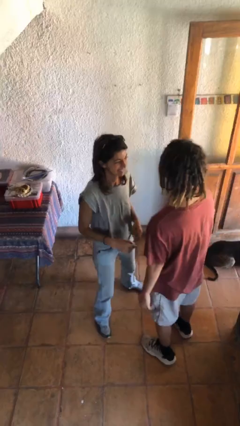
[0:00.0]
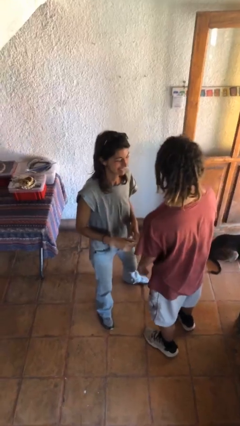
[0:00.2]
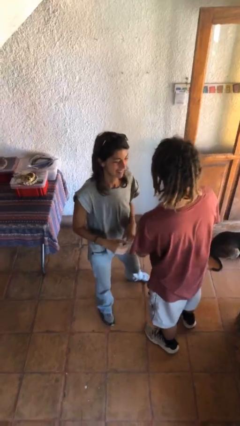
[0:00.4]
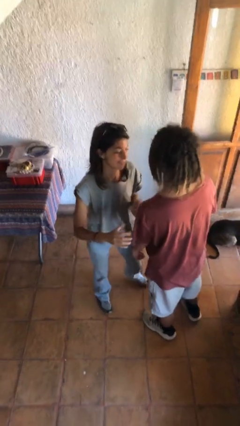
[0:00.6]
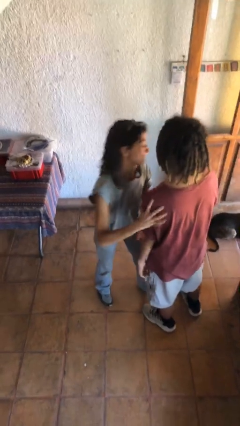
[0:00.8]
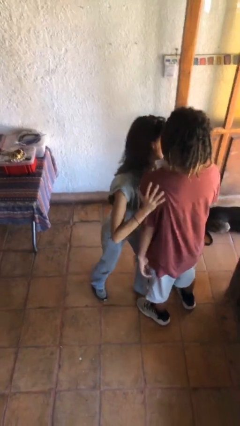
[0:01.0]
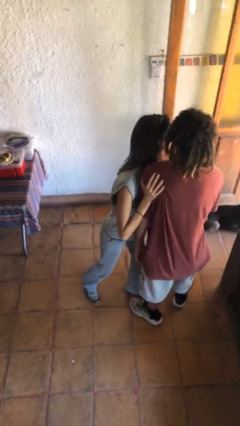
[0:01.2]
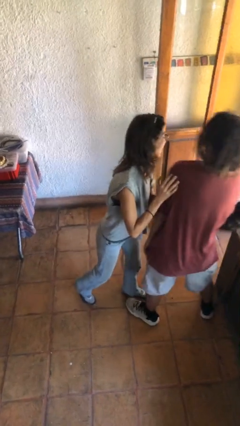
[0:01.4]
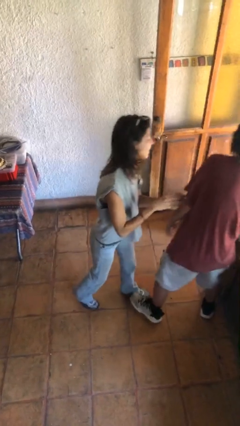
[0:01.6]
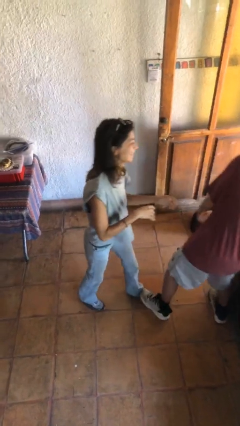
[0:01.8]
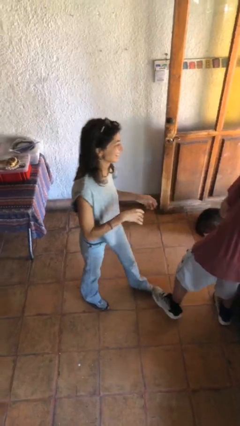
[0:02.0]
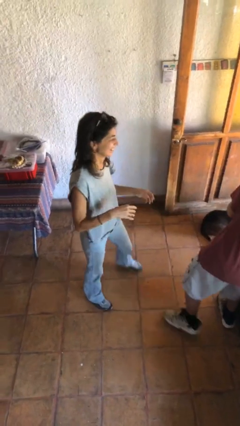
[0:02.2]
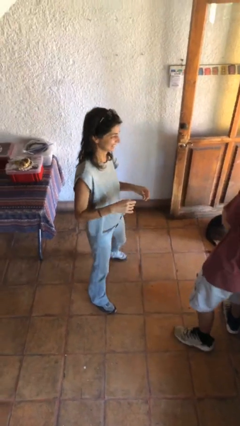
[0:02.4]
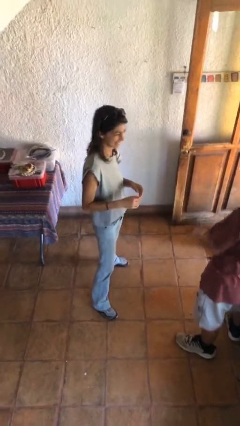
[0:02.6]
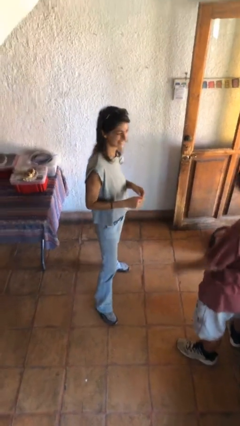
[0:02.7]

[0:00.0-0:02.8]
person shoves person

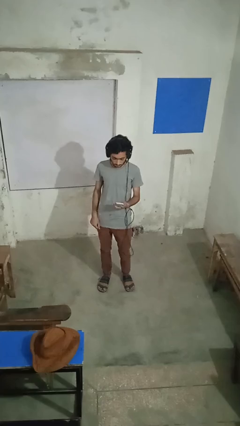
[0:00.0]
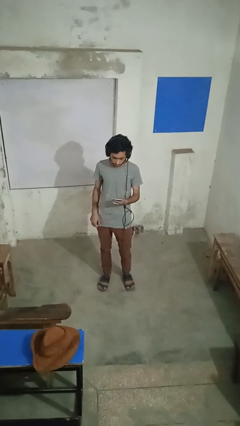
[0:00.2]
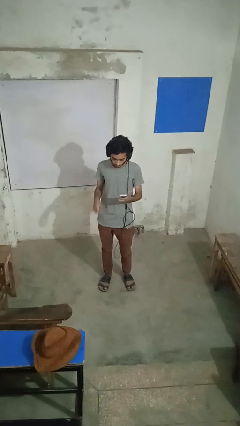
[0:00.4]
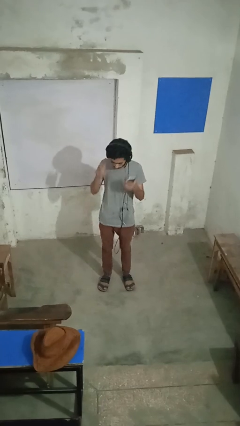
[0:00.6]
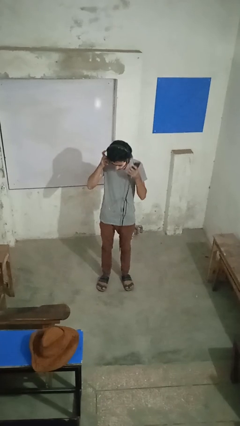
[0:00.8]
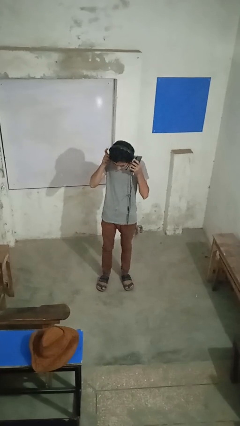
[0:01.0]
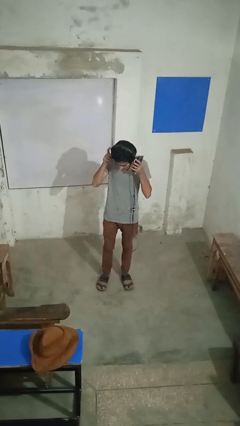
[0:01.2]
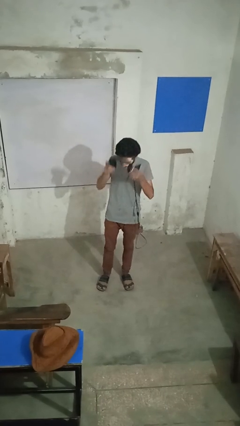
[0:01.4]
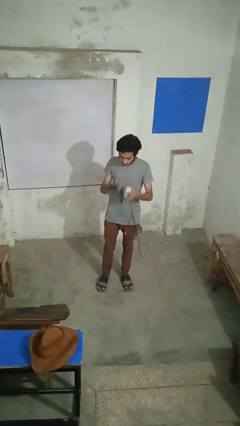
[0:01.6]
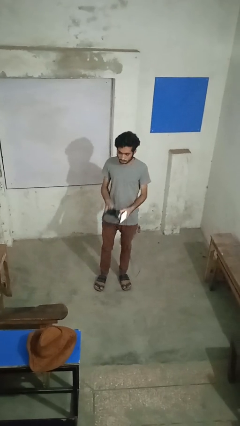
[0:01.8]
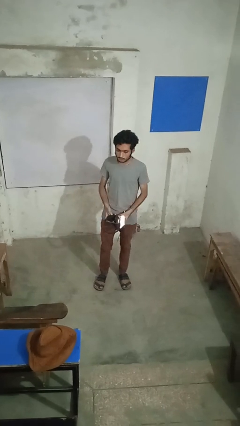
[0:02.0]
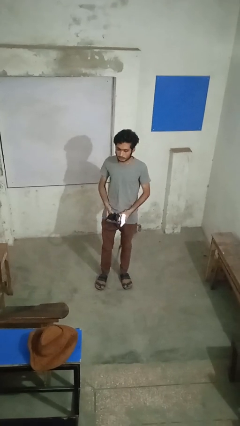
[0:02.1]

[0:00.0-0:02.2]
person takes off headphones

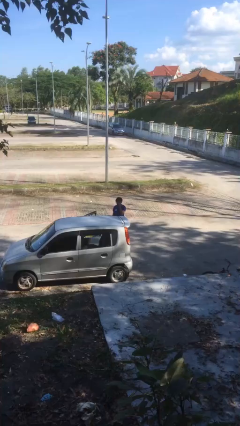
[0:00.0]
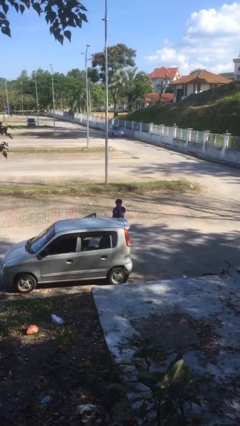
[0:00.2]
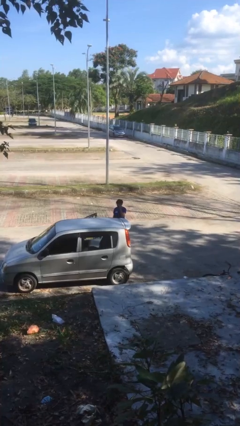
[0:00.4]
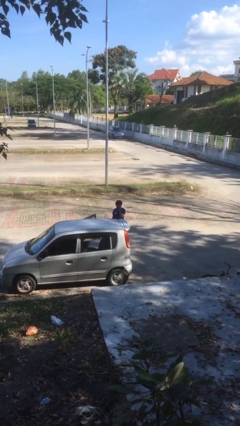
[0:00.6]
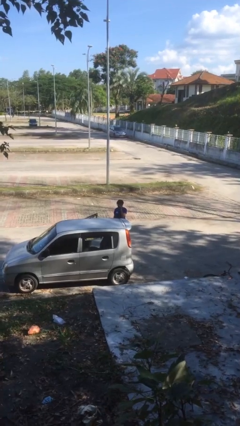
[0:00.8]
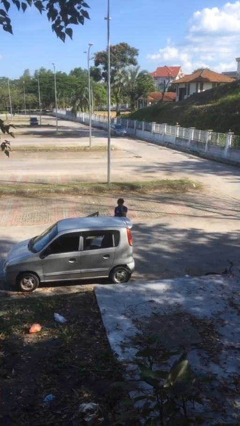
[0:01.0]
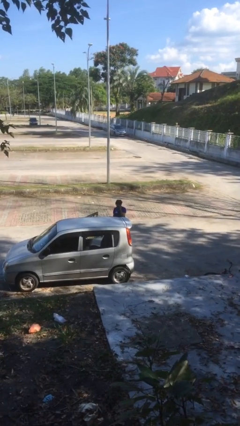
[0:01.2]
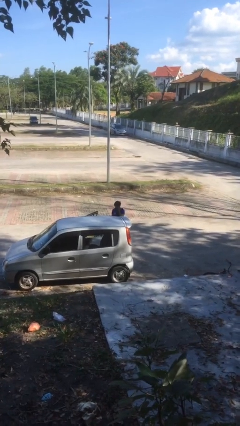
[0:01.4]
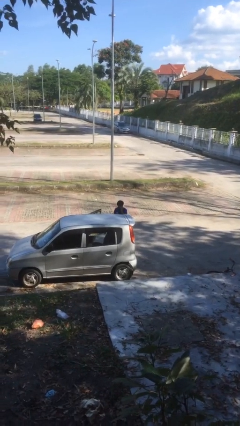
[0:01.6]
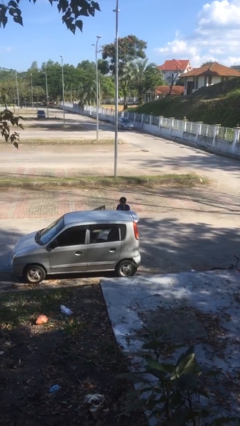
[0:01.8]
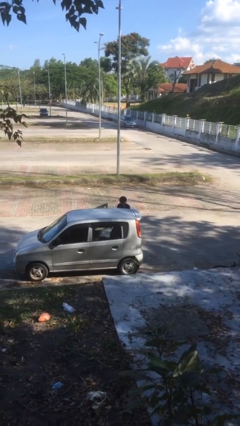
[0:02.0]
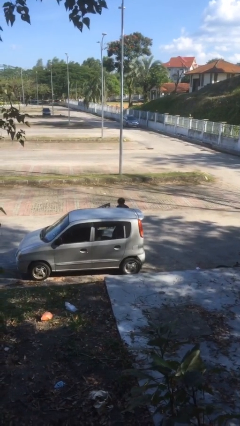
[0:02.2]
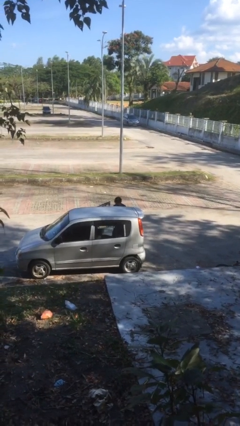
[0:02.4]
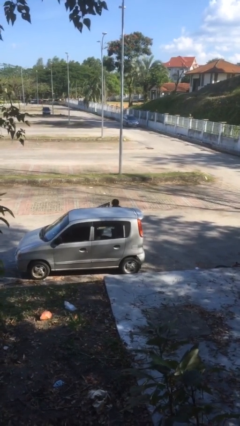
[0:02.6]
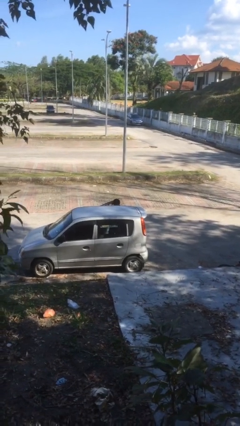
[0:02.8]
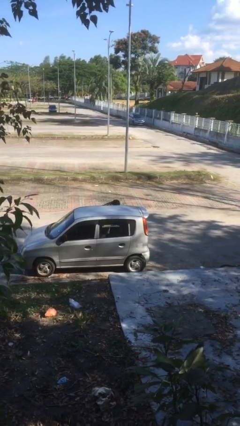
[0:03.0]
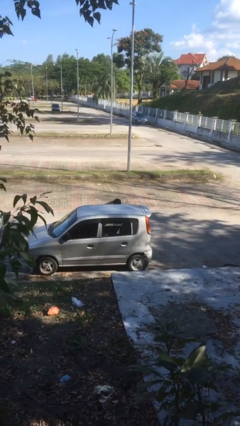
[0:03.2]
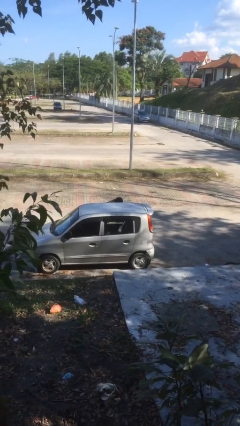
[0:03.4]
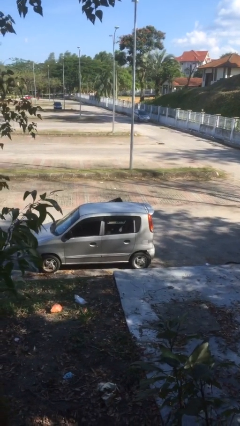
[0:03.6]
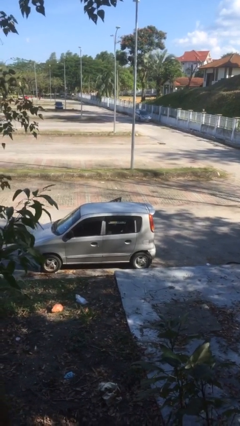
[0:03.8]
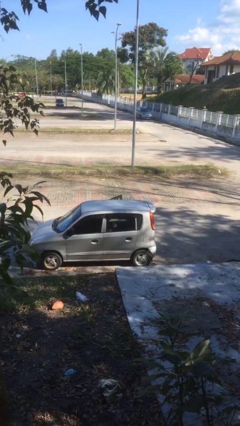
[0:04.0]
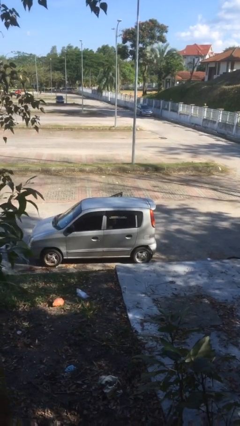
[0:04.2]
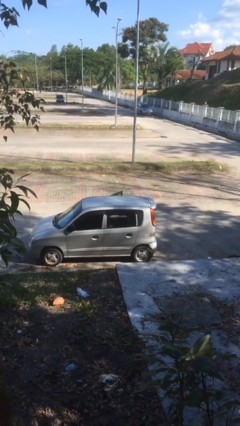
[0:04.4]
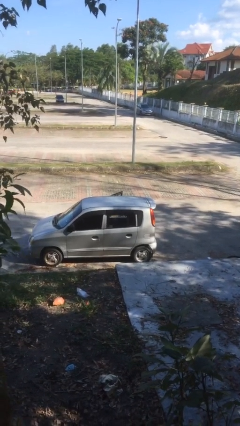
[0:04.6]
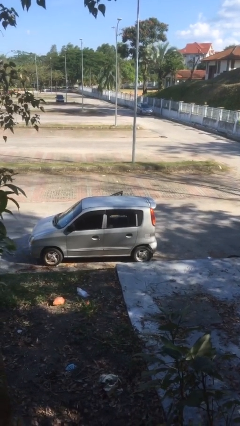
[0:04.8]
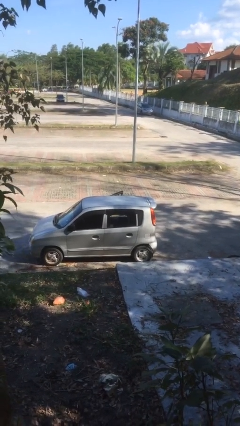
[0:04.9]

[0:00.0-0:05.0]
person enters car

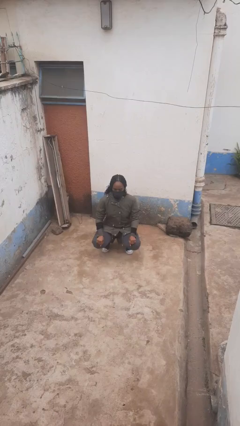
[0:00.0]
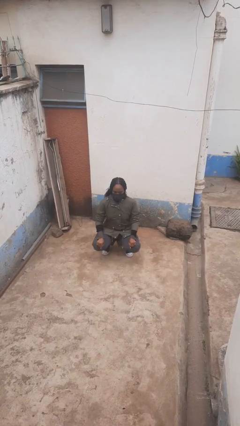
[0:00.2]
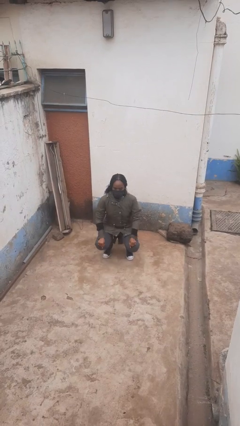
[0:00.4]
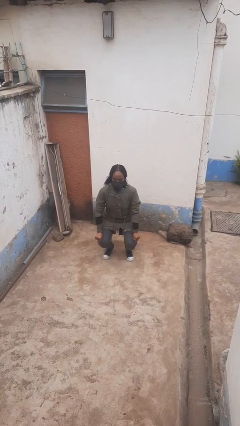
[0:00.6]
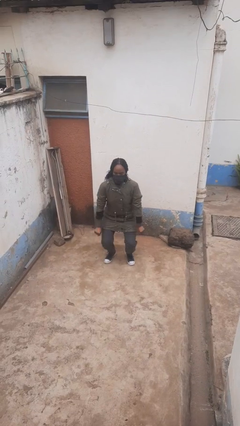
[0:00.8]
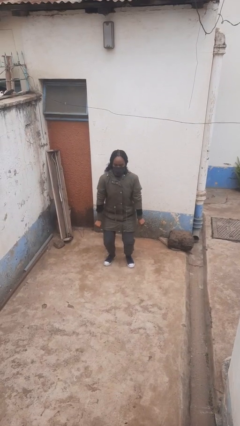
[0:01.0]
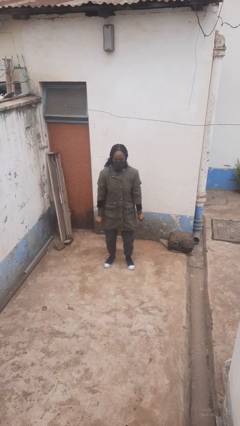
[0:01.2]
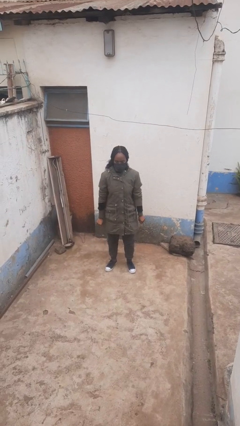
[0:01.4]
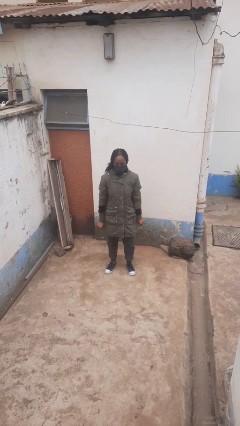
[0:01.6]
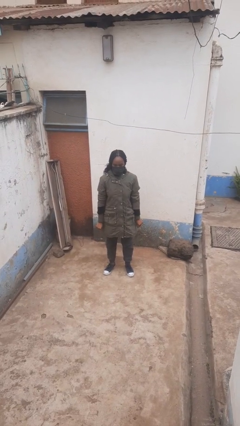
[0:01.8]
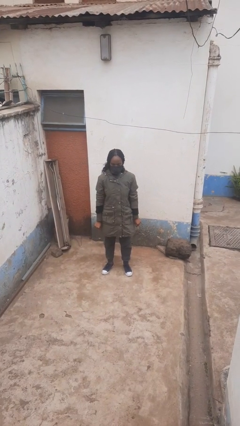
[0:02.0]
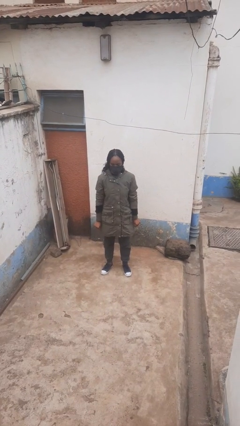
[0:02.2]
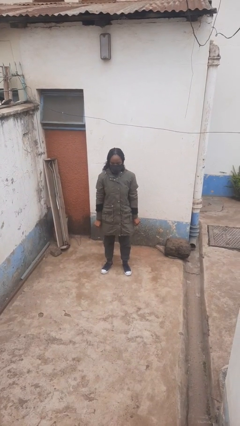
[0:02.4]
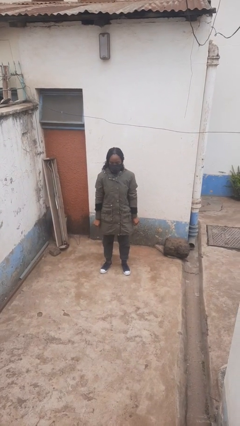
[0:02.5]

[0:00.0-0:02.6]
person stands up

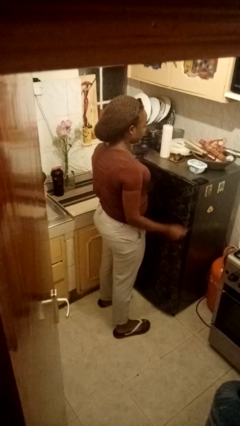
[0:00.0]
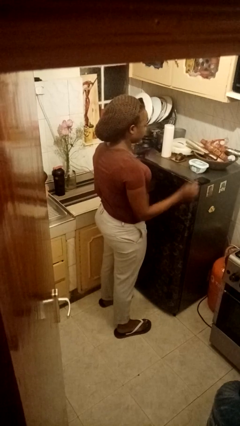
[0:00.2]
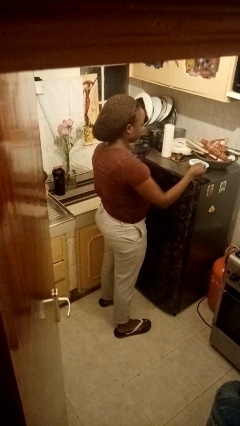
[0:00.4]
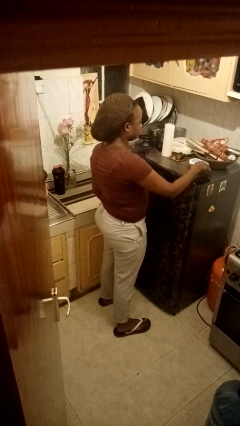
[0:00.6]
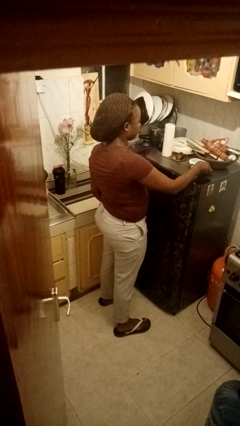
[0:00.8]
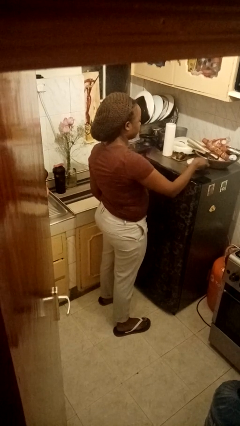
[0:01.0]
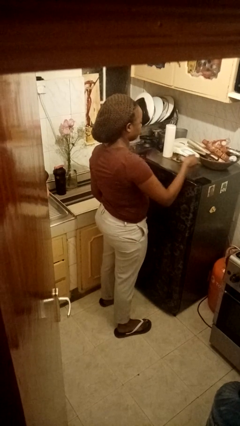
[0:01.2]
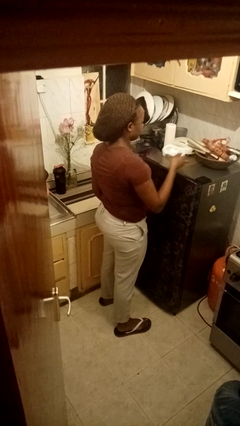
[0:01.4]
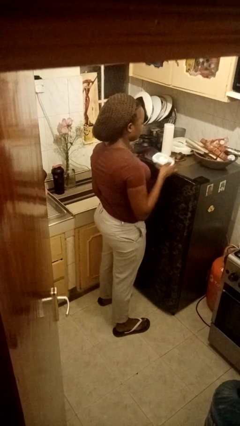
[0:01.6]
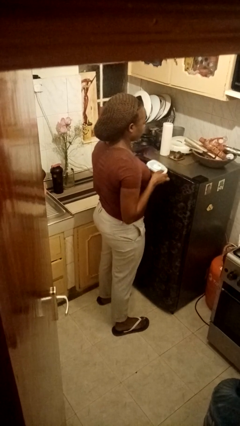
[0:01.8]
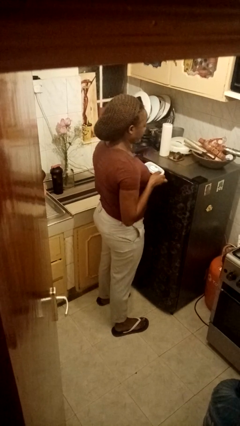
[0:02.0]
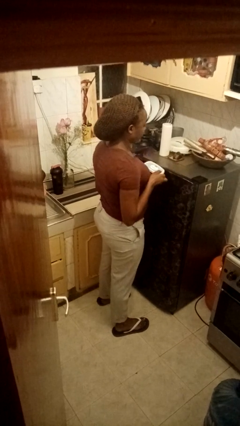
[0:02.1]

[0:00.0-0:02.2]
person picks up object from countertop

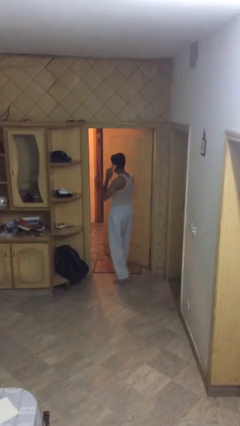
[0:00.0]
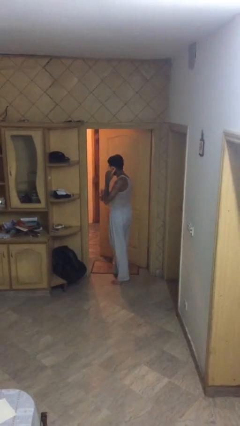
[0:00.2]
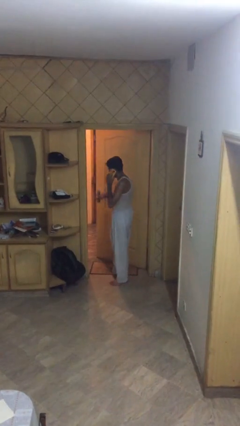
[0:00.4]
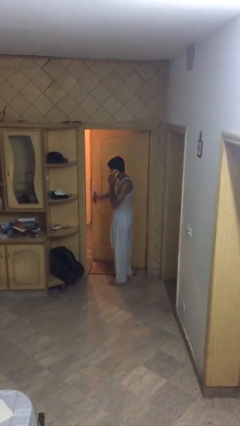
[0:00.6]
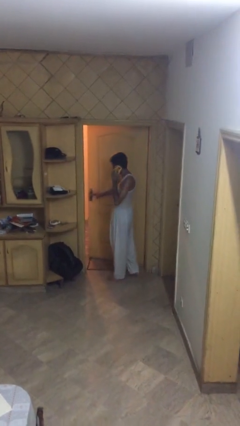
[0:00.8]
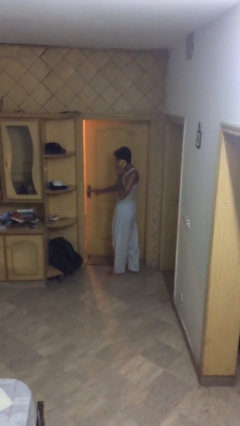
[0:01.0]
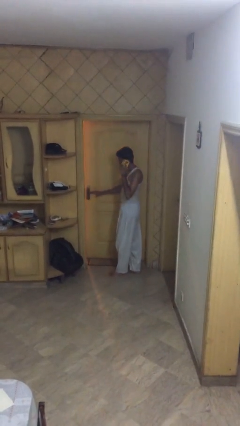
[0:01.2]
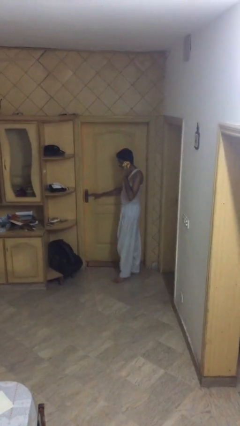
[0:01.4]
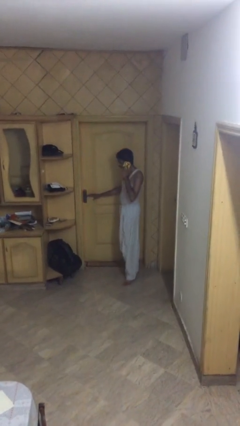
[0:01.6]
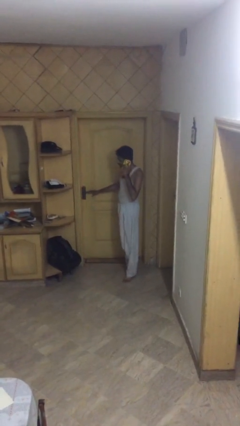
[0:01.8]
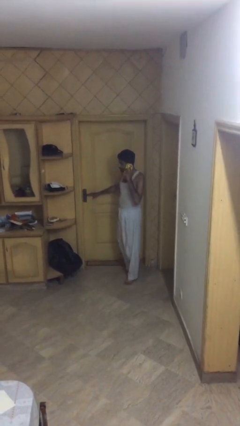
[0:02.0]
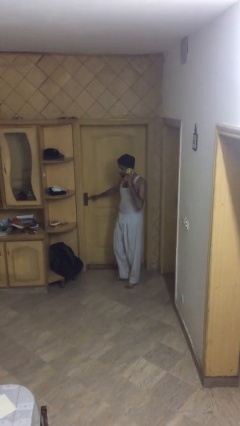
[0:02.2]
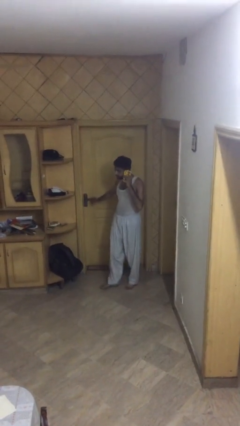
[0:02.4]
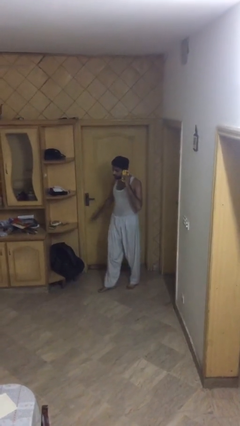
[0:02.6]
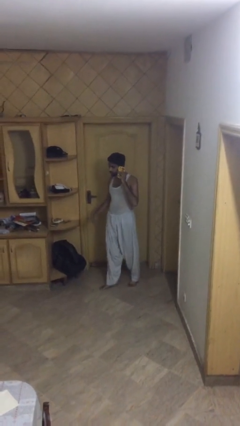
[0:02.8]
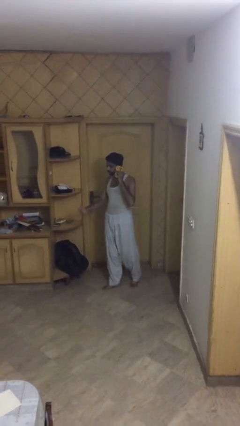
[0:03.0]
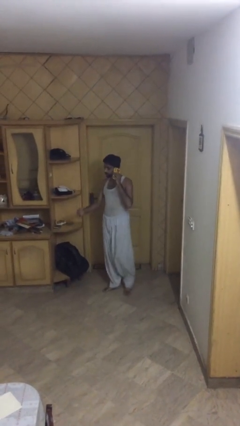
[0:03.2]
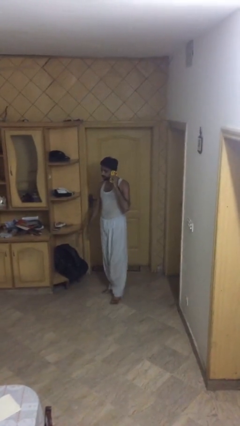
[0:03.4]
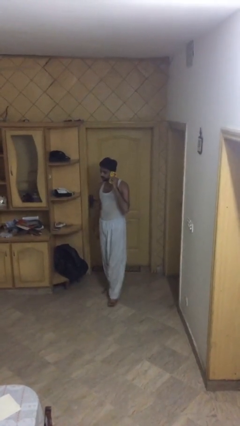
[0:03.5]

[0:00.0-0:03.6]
person closes facility door
